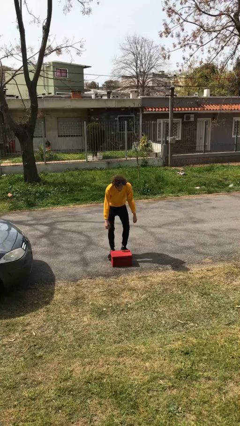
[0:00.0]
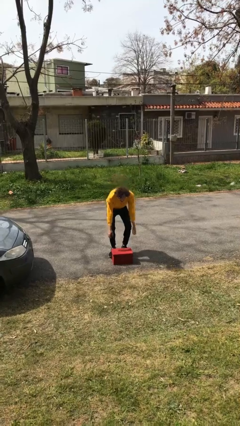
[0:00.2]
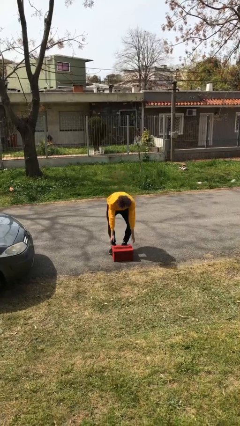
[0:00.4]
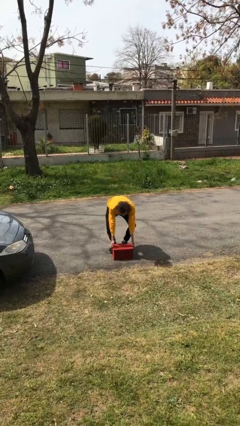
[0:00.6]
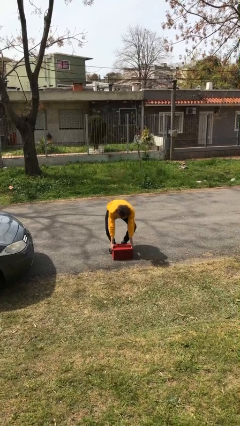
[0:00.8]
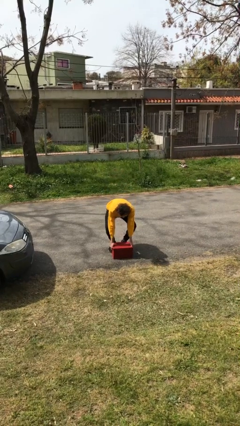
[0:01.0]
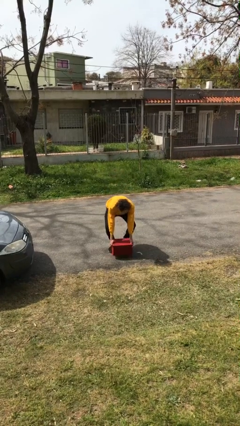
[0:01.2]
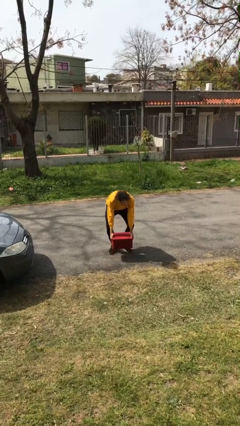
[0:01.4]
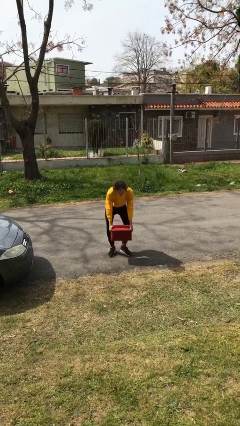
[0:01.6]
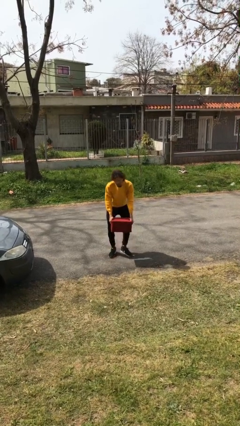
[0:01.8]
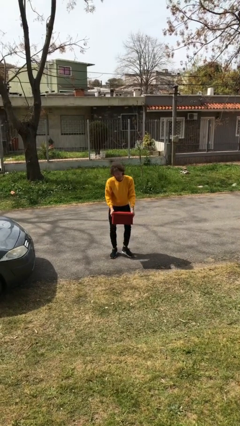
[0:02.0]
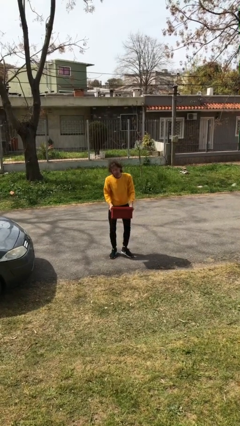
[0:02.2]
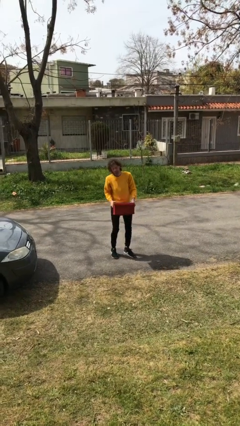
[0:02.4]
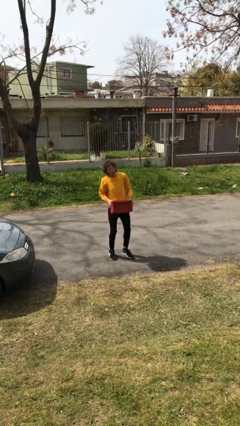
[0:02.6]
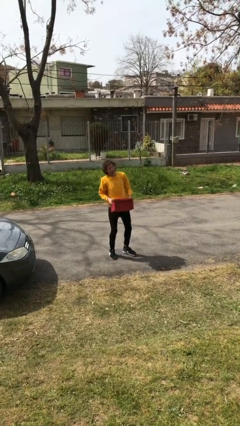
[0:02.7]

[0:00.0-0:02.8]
person picks up object from floor

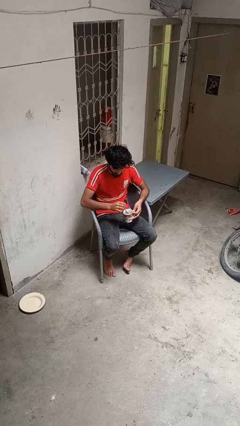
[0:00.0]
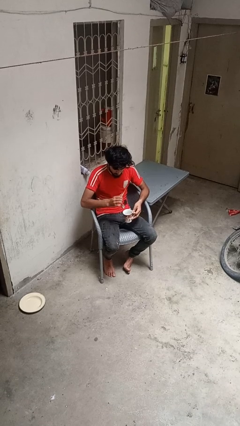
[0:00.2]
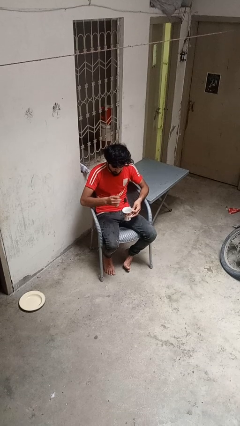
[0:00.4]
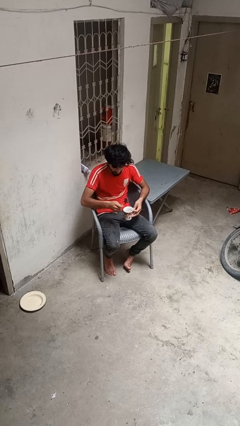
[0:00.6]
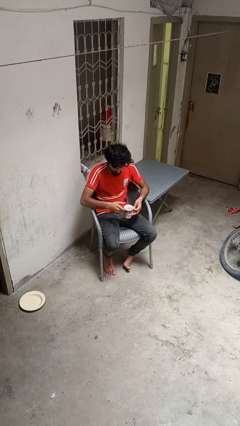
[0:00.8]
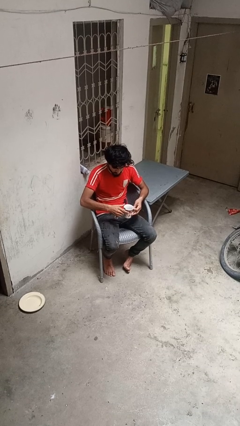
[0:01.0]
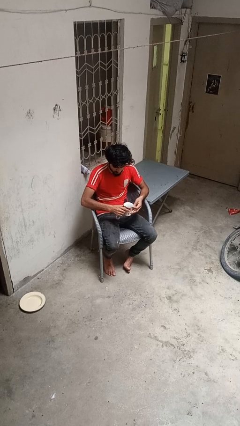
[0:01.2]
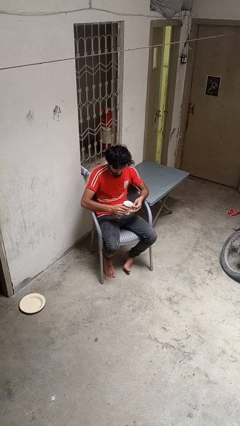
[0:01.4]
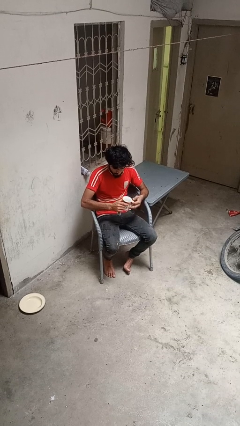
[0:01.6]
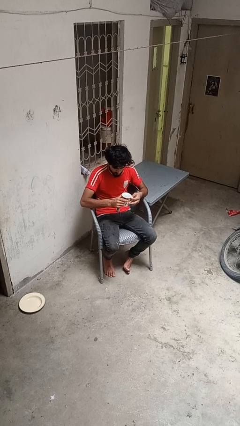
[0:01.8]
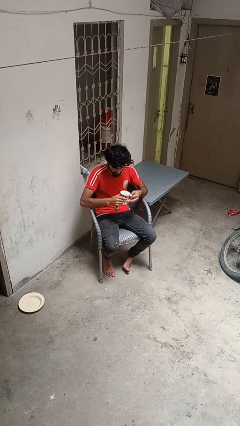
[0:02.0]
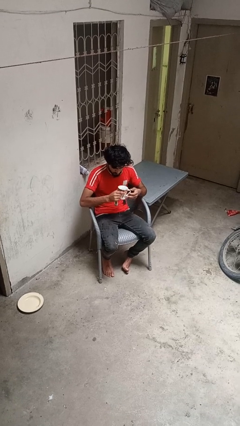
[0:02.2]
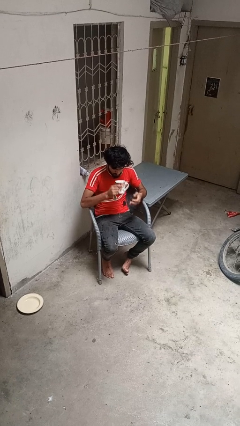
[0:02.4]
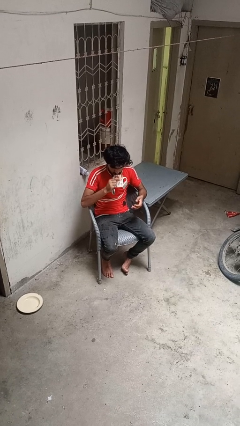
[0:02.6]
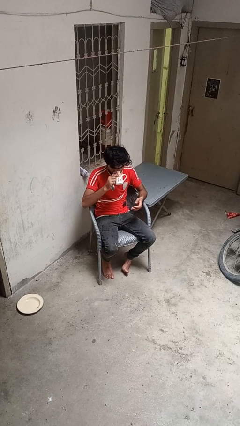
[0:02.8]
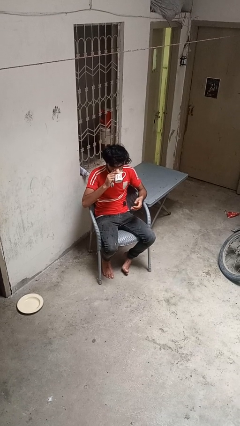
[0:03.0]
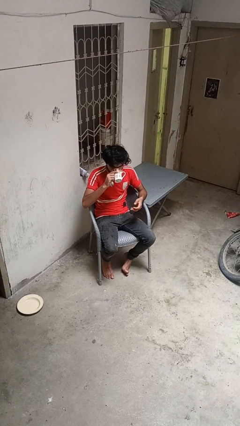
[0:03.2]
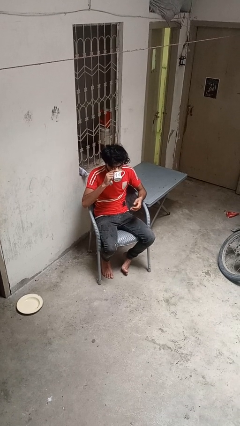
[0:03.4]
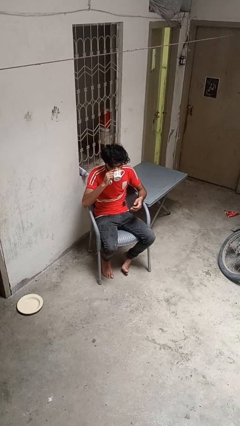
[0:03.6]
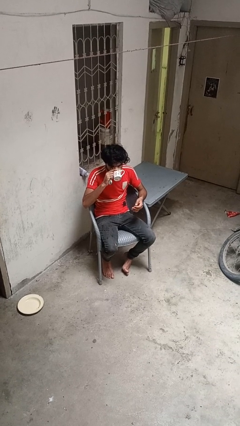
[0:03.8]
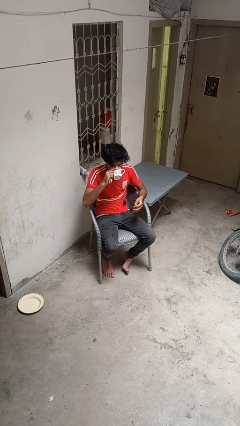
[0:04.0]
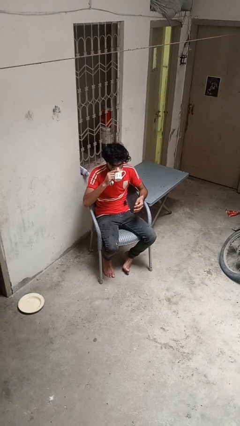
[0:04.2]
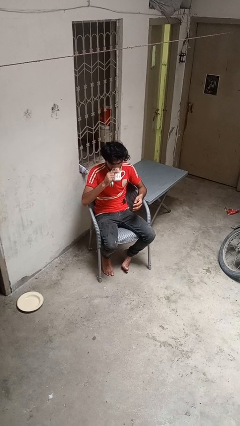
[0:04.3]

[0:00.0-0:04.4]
person drinks from mug

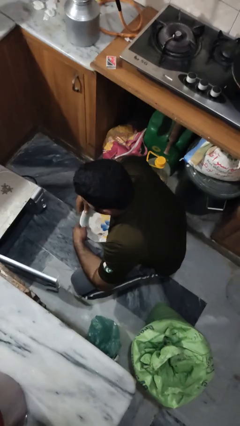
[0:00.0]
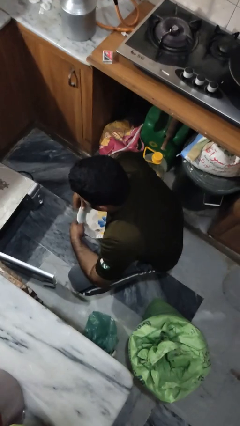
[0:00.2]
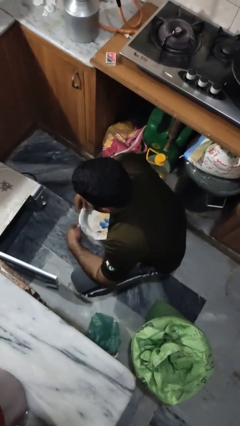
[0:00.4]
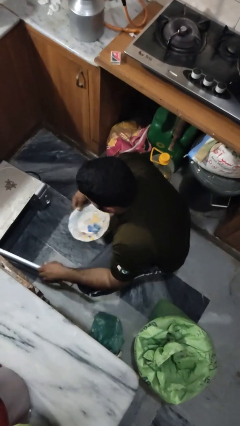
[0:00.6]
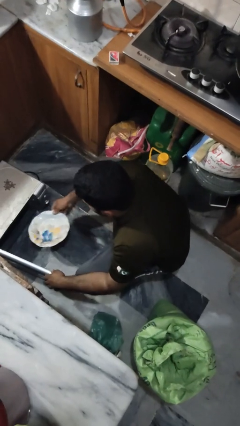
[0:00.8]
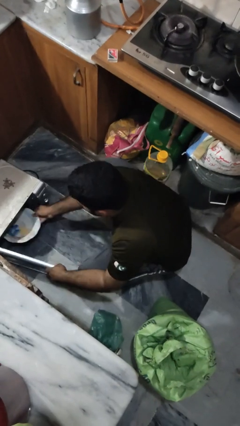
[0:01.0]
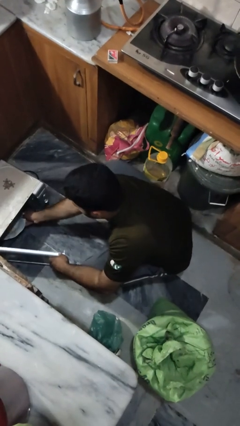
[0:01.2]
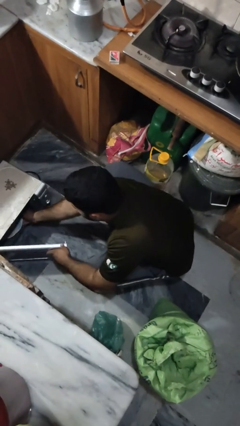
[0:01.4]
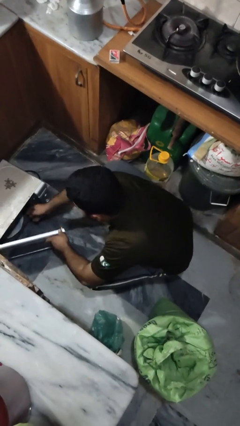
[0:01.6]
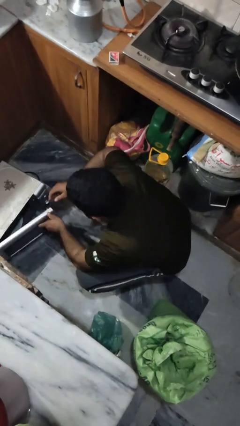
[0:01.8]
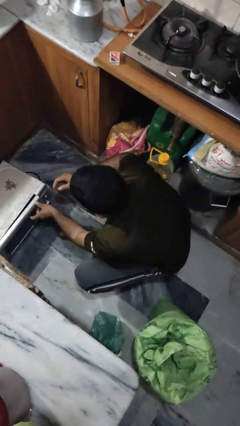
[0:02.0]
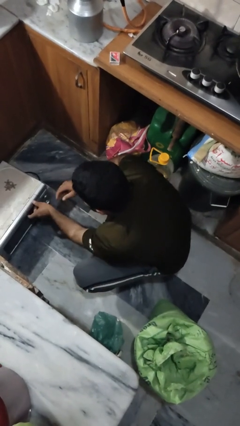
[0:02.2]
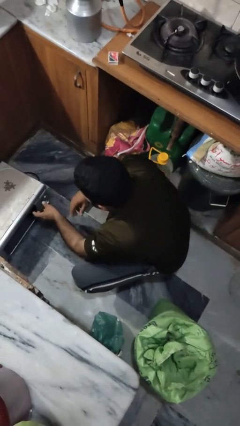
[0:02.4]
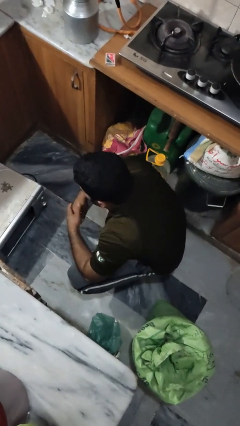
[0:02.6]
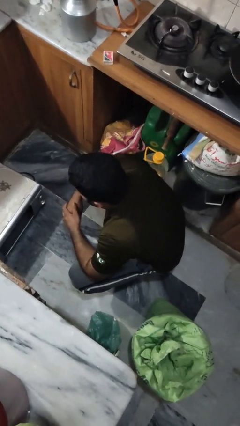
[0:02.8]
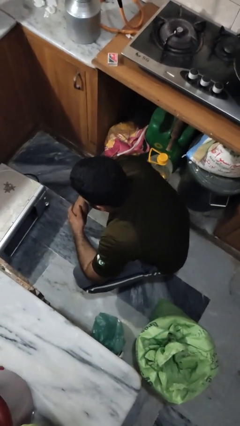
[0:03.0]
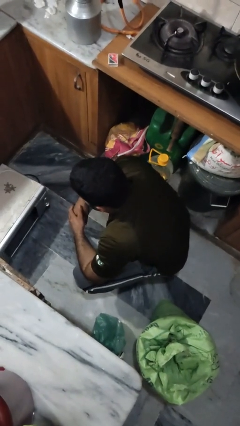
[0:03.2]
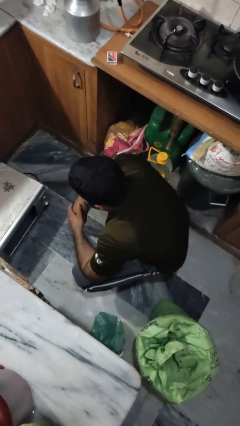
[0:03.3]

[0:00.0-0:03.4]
person puts object into oven

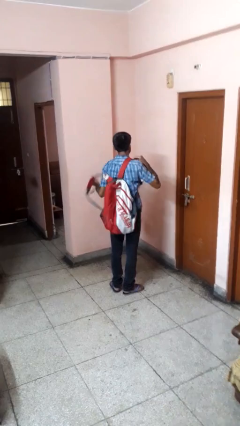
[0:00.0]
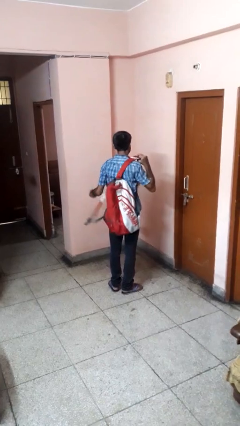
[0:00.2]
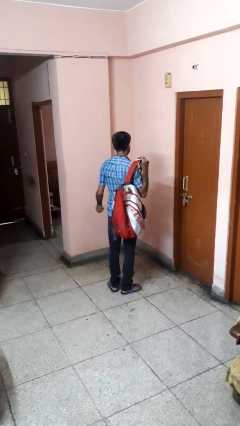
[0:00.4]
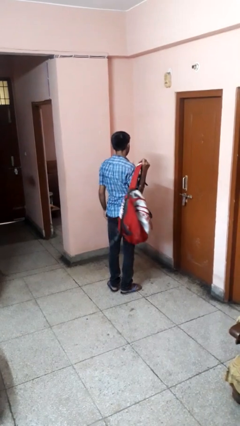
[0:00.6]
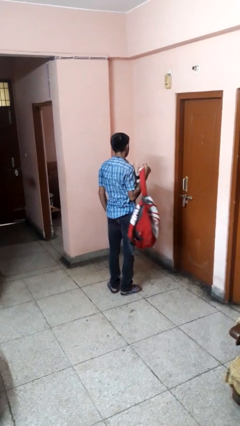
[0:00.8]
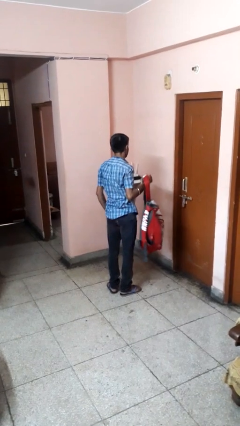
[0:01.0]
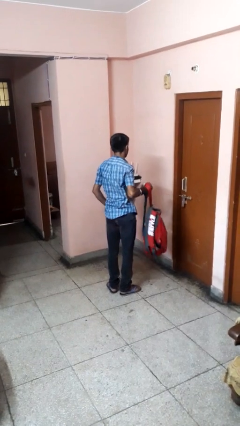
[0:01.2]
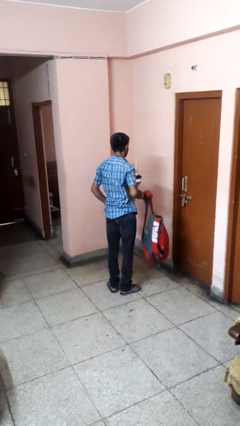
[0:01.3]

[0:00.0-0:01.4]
person takes off backpack

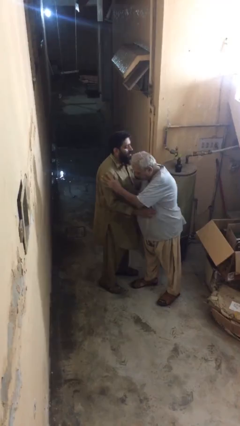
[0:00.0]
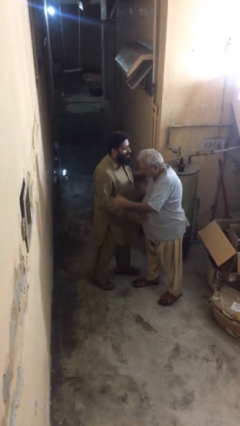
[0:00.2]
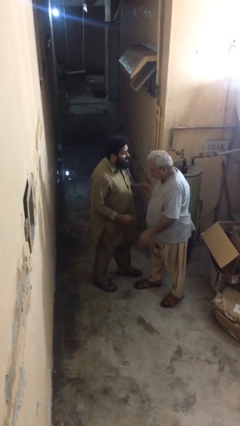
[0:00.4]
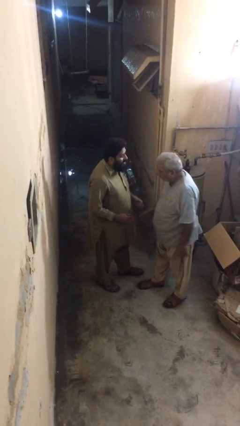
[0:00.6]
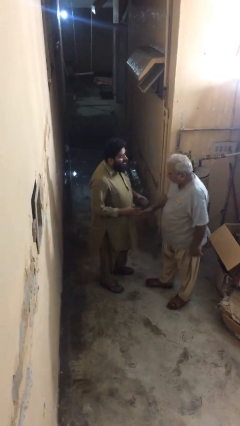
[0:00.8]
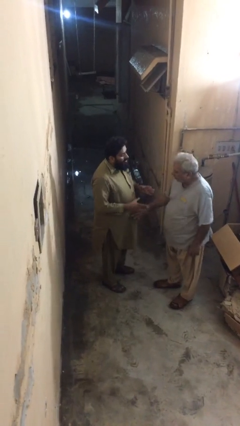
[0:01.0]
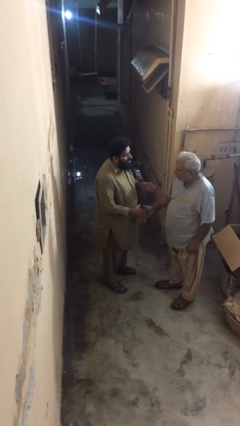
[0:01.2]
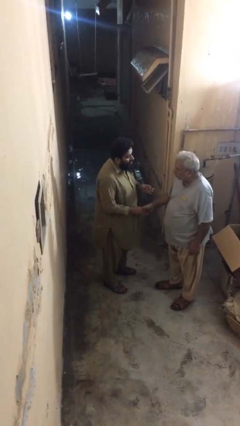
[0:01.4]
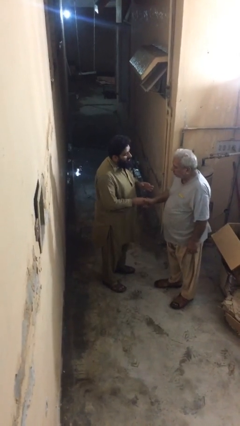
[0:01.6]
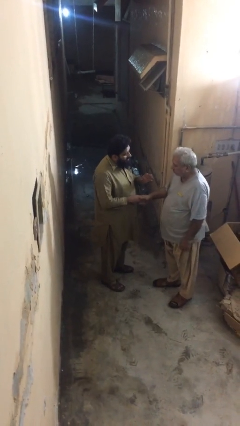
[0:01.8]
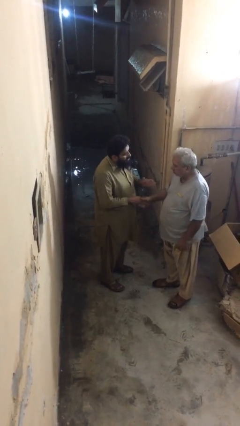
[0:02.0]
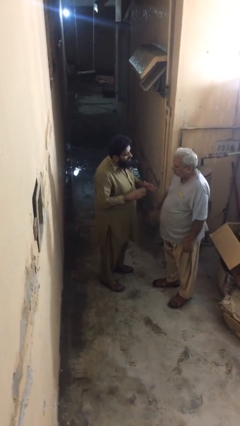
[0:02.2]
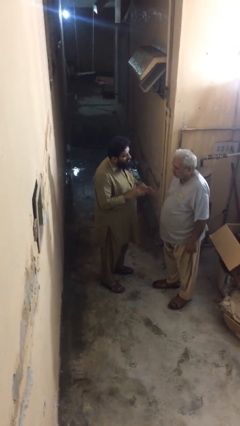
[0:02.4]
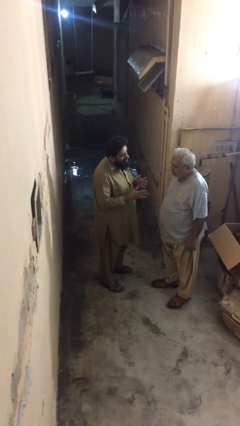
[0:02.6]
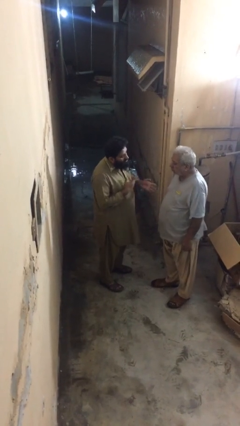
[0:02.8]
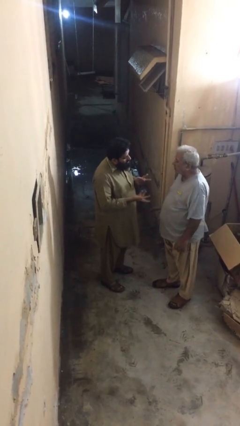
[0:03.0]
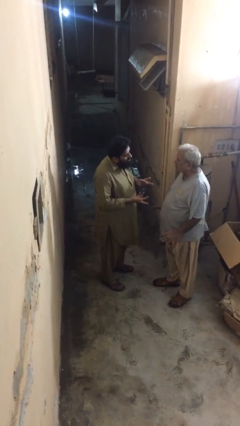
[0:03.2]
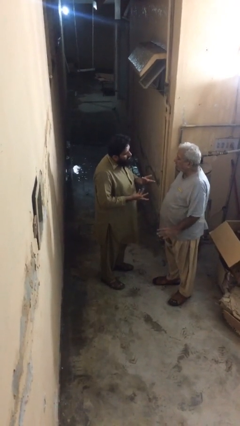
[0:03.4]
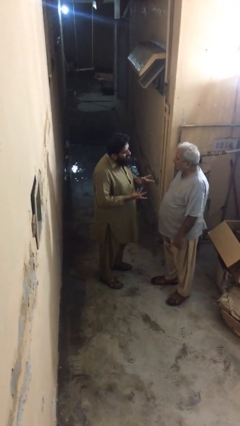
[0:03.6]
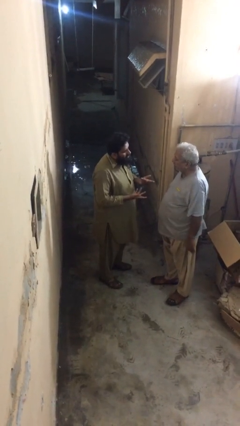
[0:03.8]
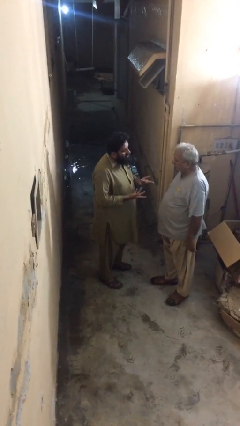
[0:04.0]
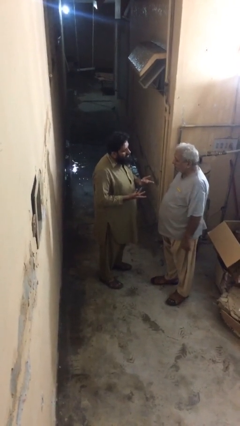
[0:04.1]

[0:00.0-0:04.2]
person talks to person

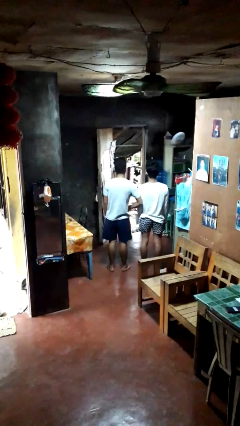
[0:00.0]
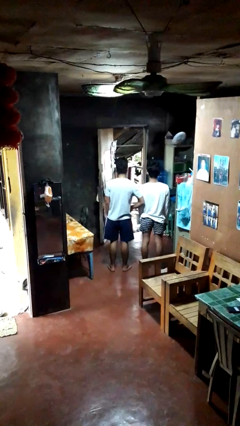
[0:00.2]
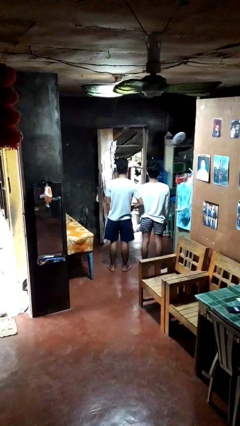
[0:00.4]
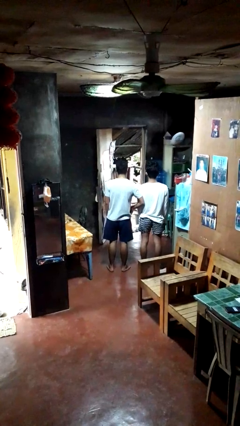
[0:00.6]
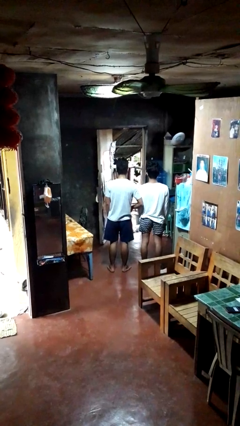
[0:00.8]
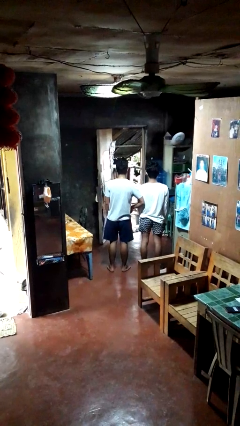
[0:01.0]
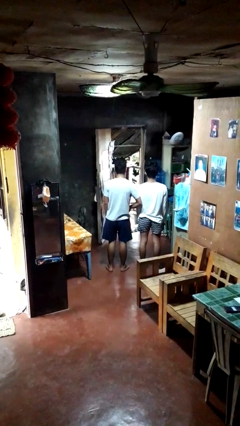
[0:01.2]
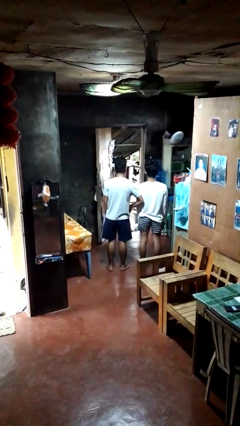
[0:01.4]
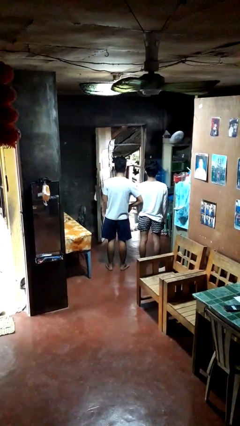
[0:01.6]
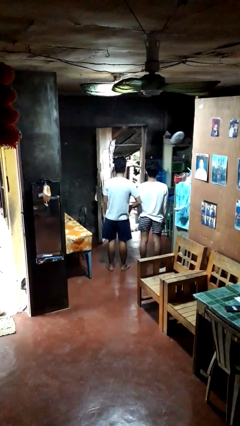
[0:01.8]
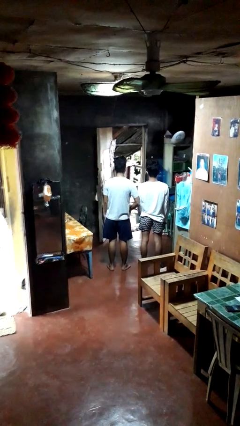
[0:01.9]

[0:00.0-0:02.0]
person nudges person with elbow
